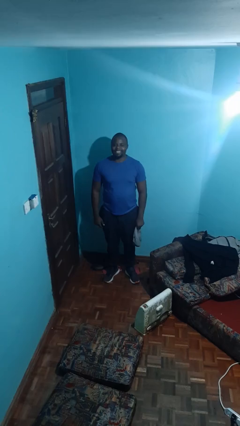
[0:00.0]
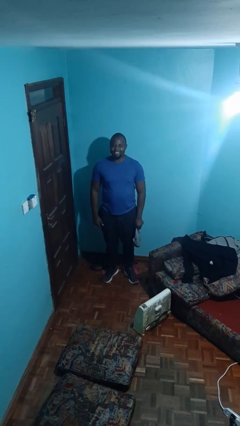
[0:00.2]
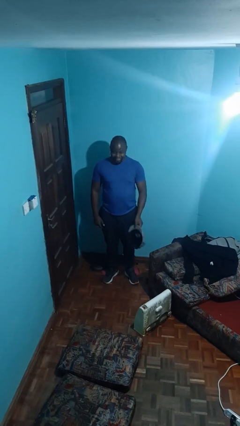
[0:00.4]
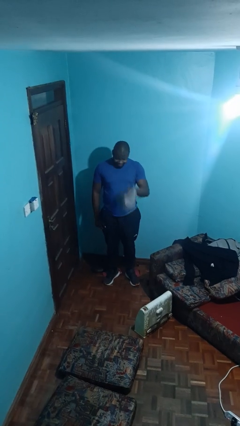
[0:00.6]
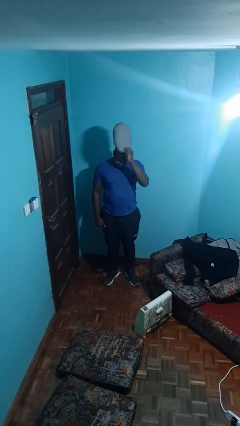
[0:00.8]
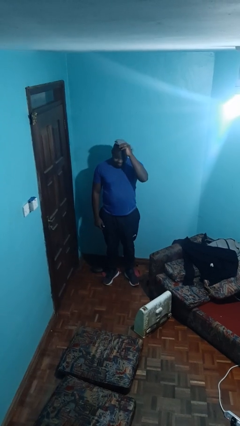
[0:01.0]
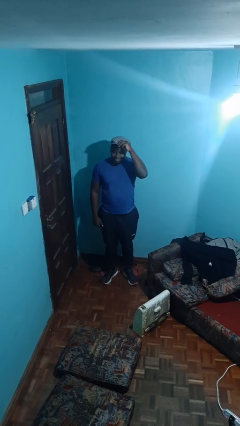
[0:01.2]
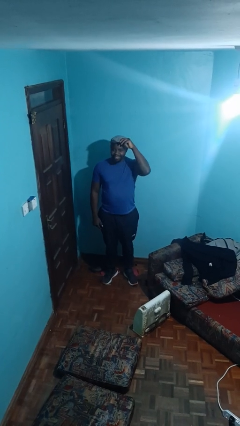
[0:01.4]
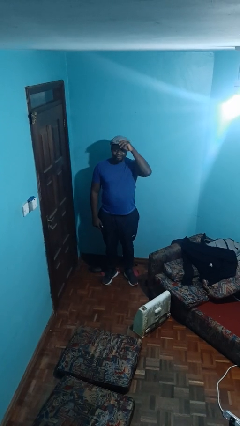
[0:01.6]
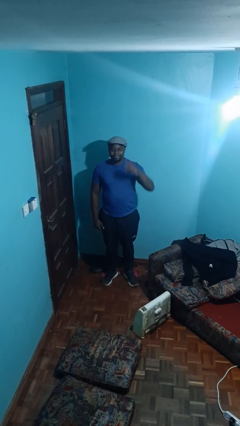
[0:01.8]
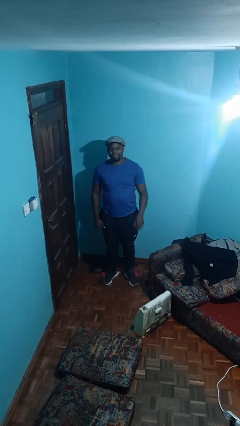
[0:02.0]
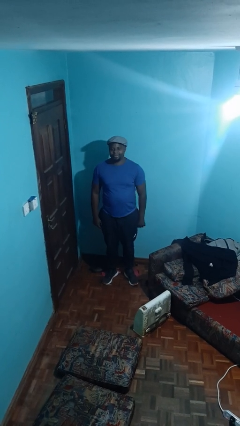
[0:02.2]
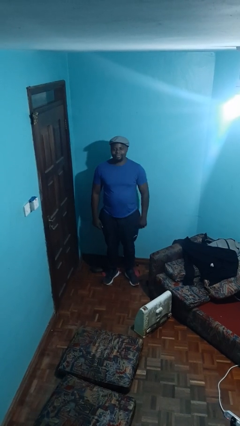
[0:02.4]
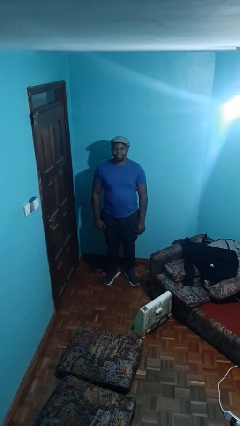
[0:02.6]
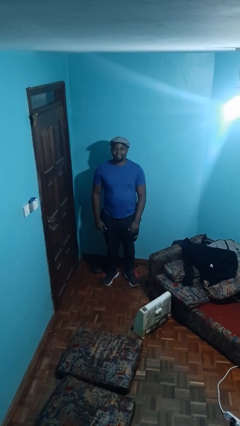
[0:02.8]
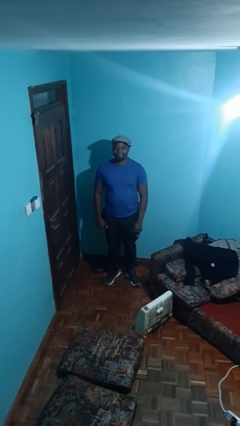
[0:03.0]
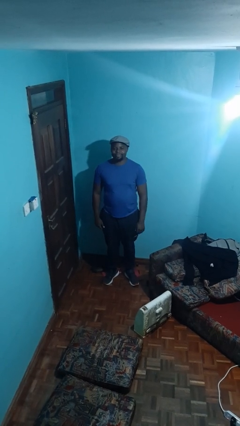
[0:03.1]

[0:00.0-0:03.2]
person puts on hat

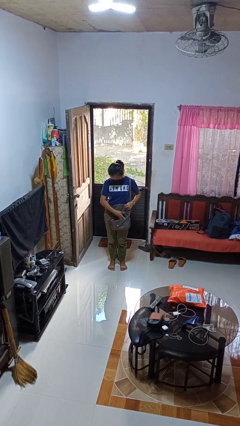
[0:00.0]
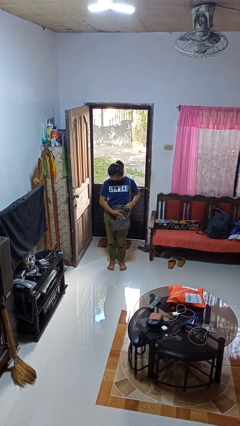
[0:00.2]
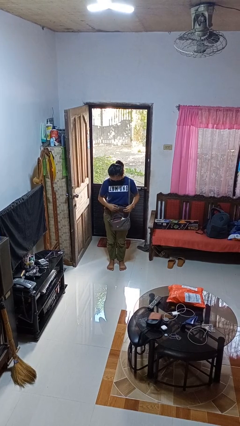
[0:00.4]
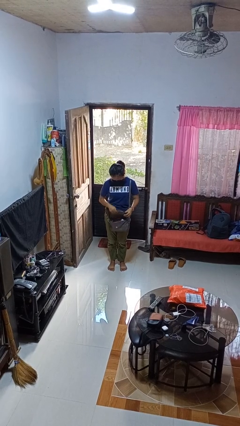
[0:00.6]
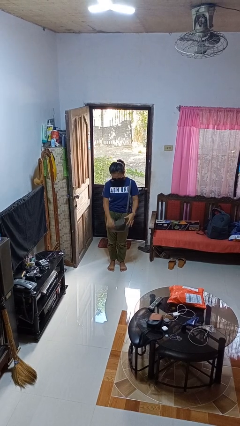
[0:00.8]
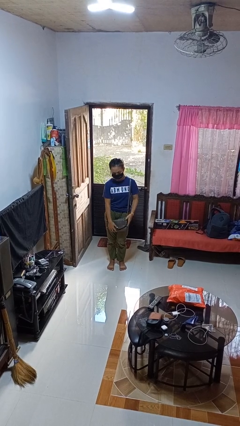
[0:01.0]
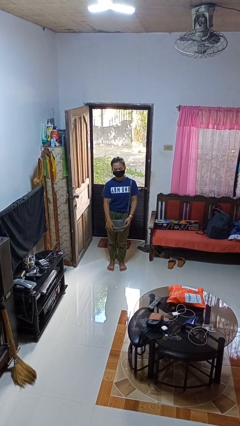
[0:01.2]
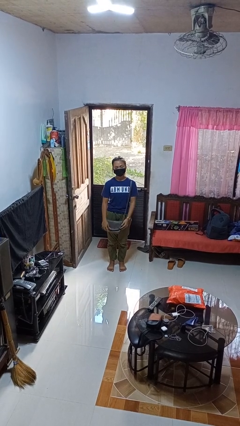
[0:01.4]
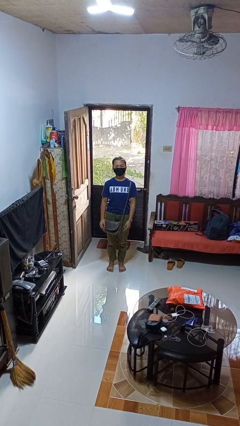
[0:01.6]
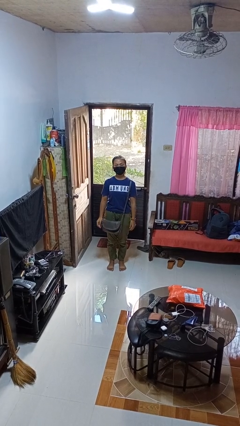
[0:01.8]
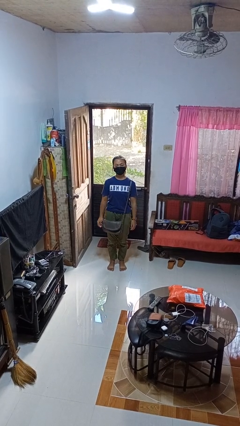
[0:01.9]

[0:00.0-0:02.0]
person puts object into purse

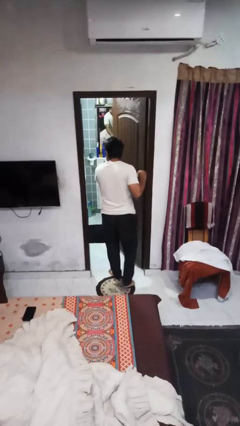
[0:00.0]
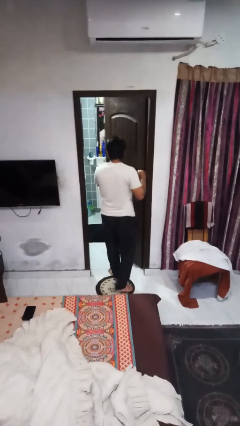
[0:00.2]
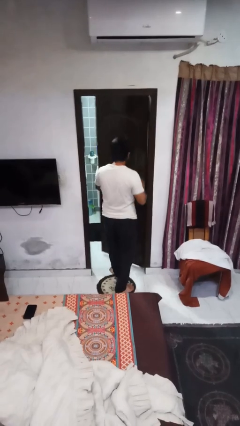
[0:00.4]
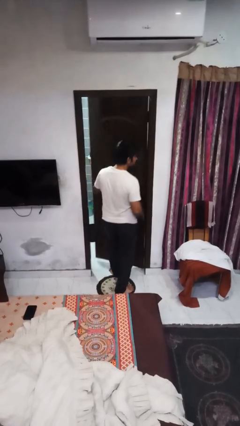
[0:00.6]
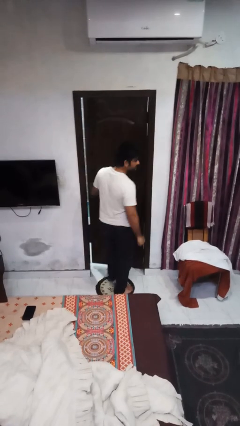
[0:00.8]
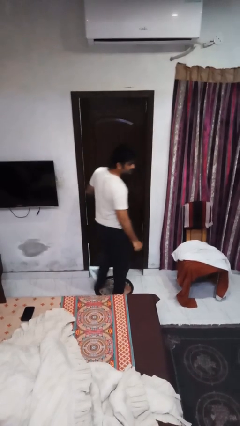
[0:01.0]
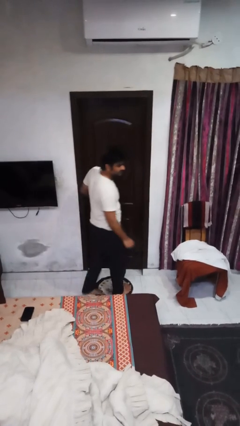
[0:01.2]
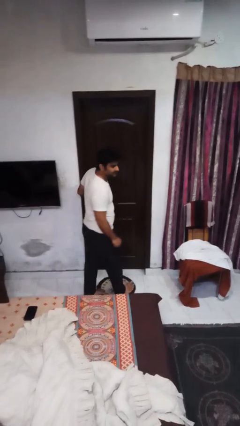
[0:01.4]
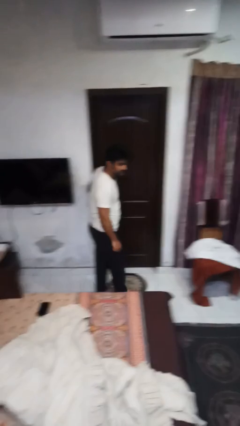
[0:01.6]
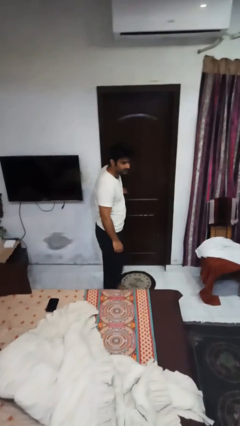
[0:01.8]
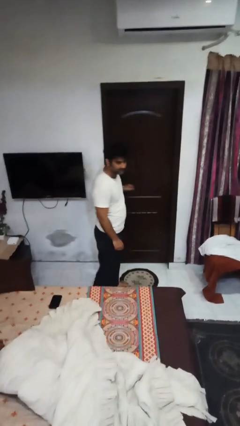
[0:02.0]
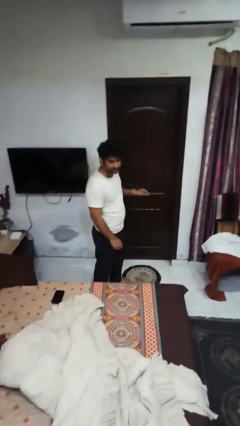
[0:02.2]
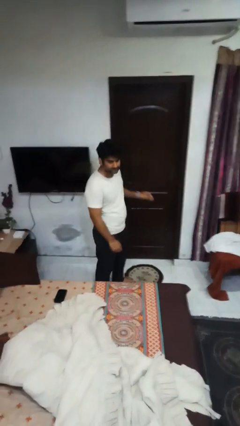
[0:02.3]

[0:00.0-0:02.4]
person closes facility door

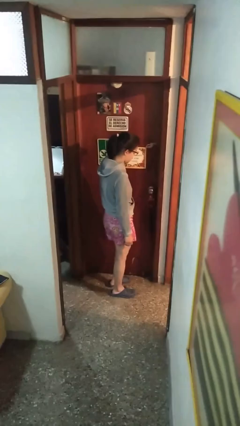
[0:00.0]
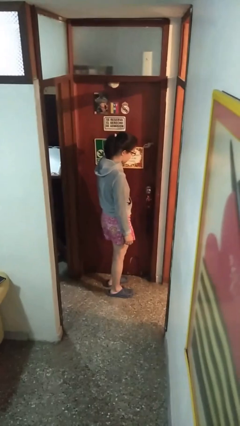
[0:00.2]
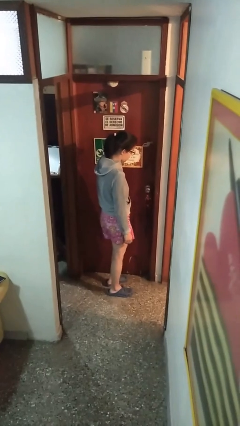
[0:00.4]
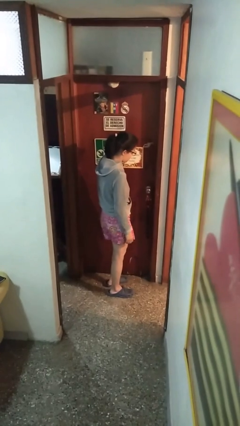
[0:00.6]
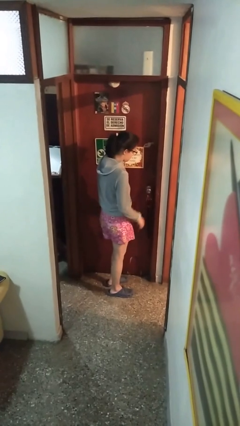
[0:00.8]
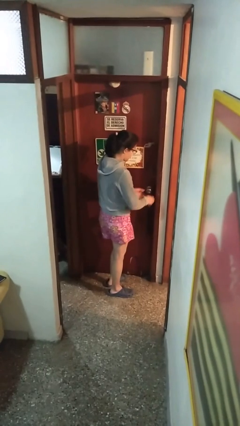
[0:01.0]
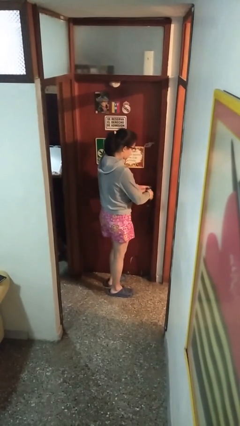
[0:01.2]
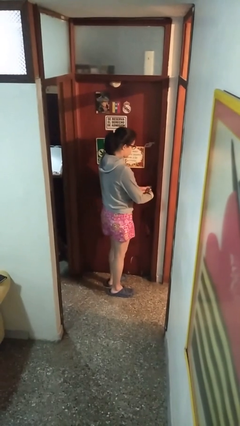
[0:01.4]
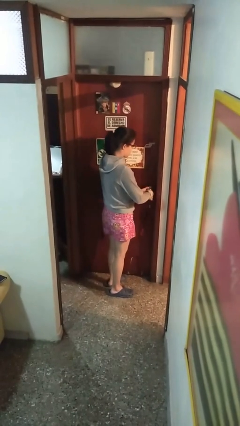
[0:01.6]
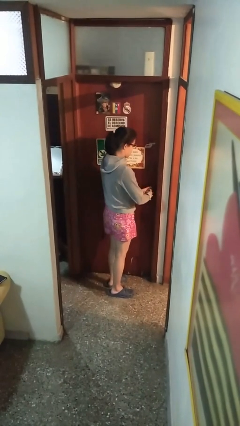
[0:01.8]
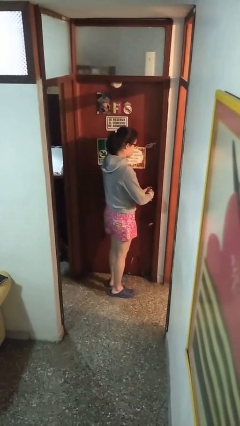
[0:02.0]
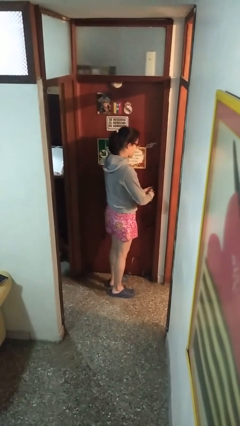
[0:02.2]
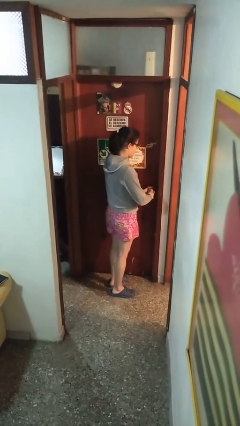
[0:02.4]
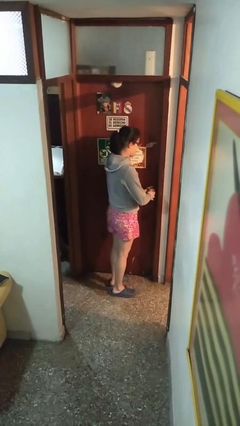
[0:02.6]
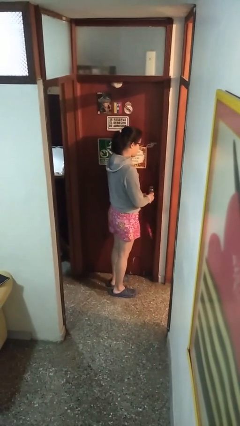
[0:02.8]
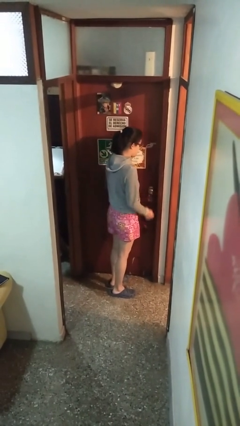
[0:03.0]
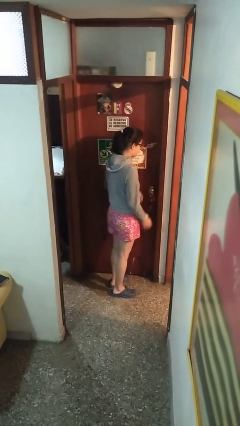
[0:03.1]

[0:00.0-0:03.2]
person unlocks door with keys

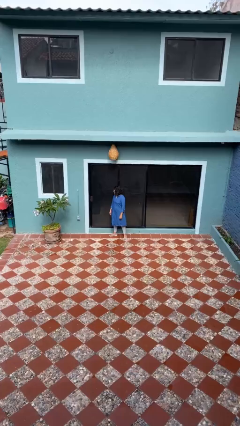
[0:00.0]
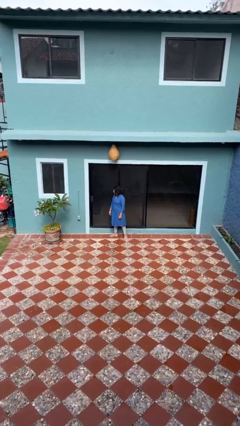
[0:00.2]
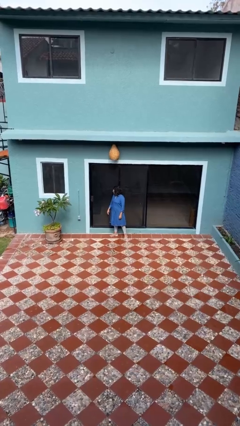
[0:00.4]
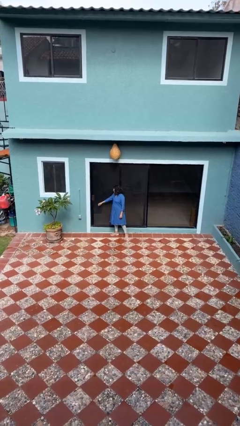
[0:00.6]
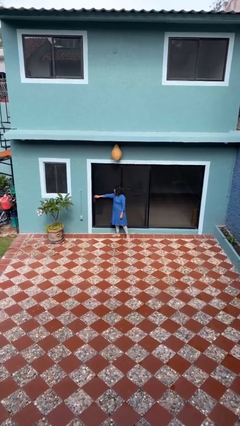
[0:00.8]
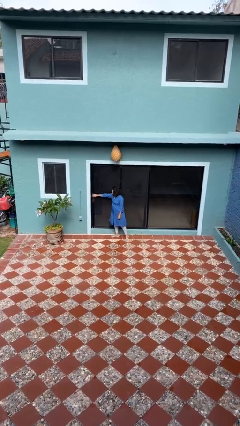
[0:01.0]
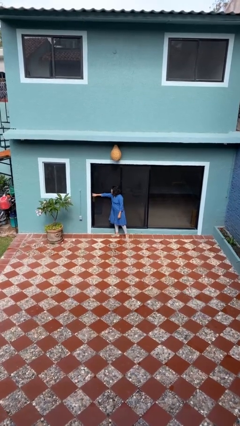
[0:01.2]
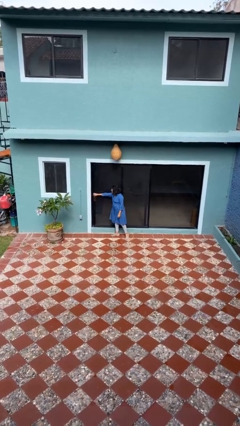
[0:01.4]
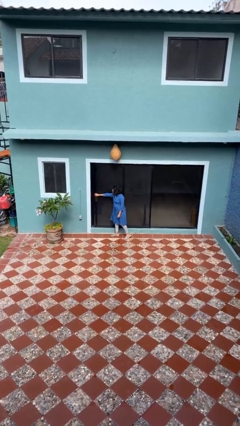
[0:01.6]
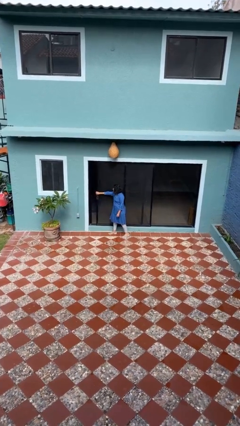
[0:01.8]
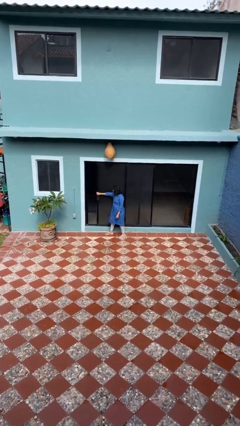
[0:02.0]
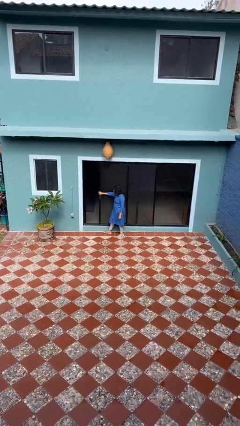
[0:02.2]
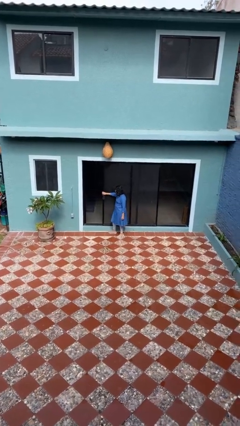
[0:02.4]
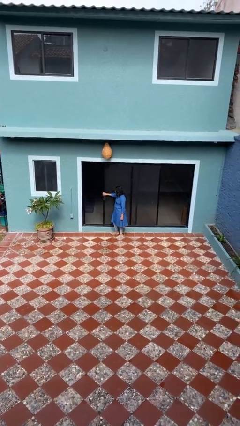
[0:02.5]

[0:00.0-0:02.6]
person opens sliding door

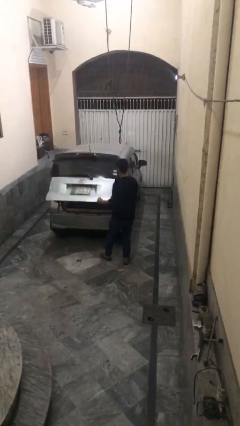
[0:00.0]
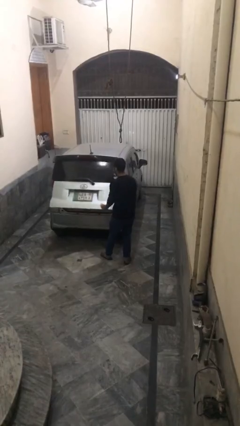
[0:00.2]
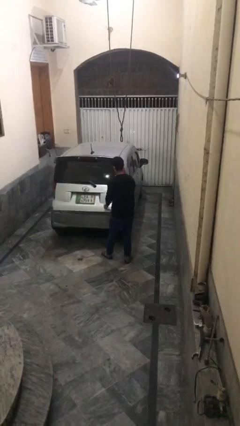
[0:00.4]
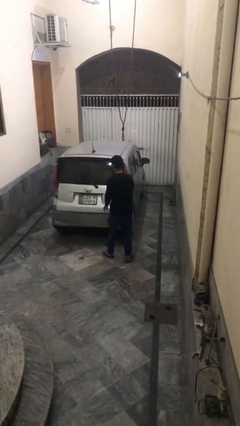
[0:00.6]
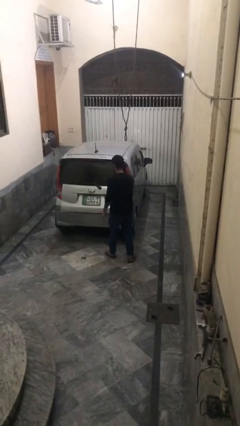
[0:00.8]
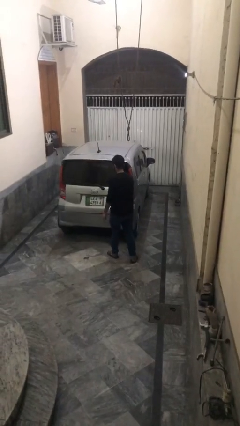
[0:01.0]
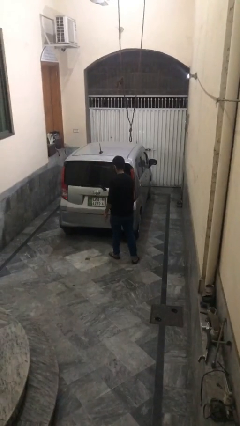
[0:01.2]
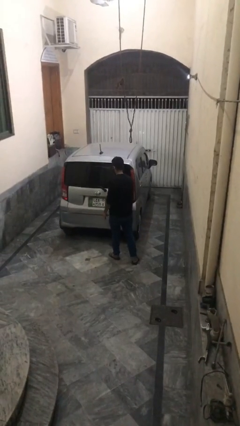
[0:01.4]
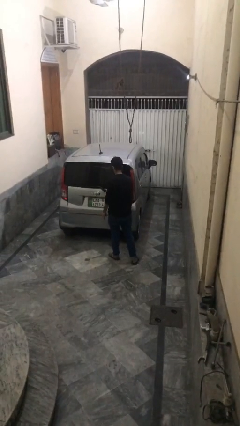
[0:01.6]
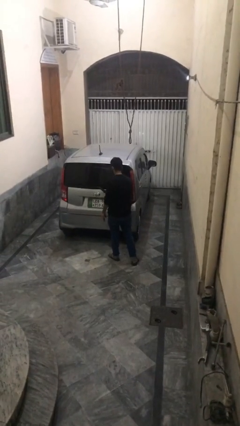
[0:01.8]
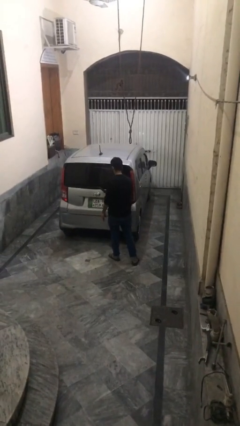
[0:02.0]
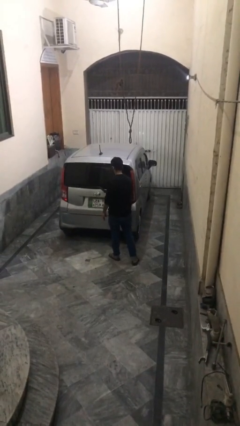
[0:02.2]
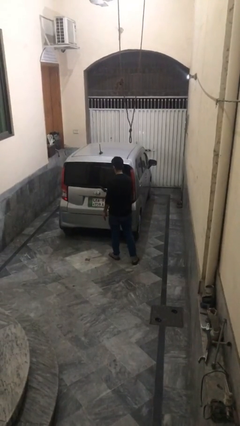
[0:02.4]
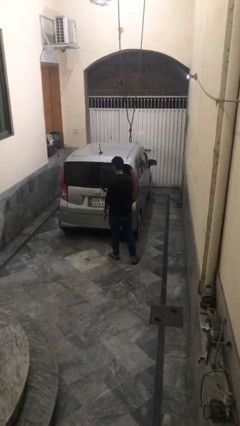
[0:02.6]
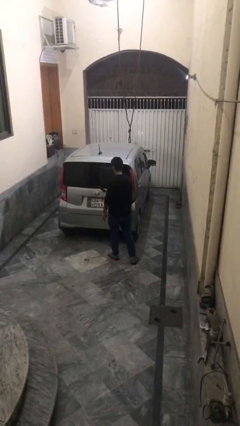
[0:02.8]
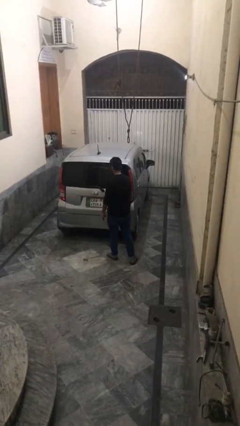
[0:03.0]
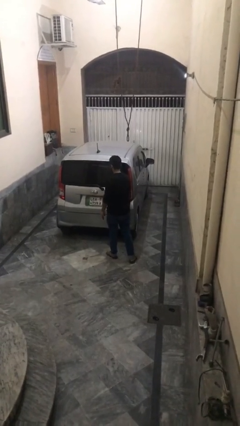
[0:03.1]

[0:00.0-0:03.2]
person closes car trunk

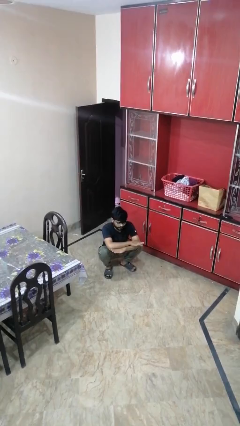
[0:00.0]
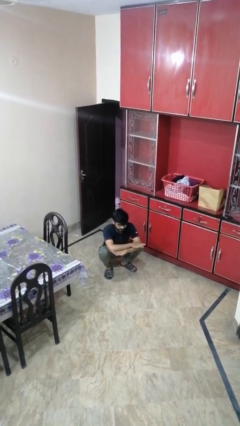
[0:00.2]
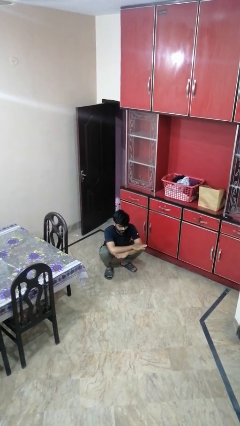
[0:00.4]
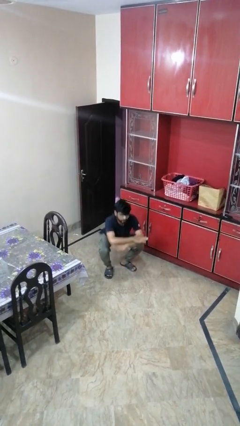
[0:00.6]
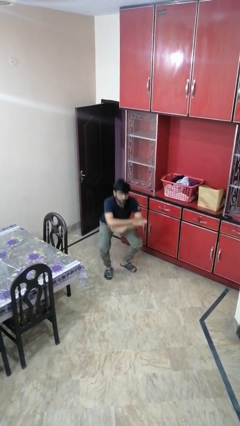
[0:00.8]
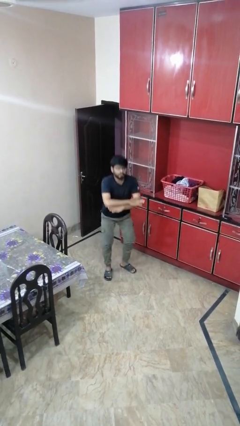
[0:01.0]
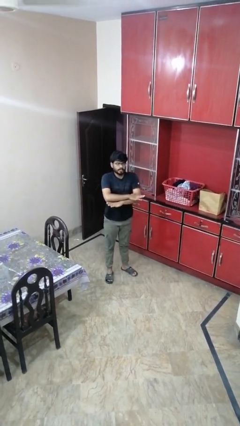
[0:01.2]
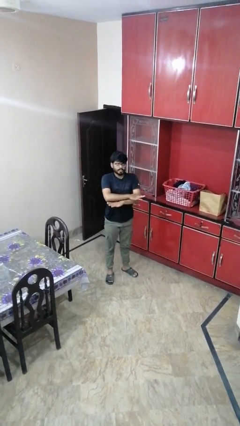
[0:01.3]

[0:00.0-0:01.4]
person stands up
